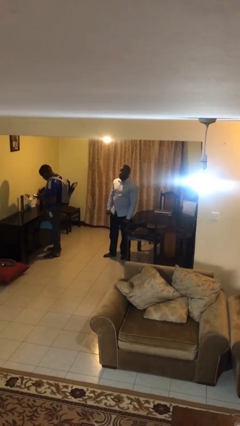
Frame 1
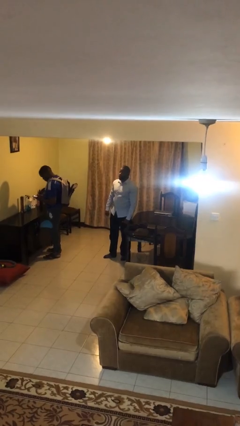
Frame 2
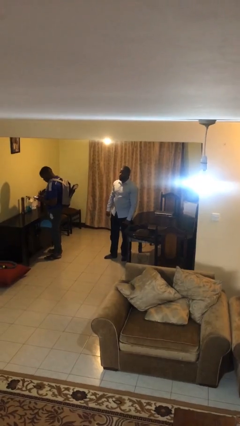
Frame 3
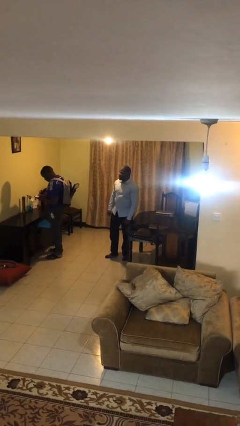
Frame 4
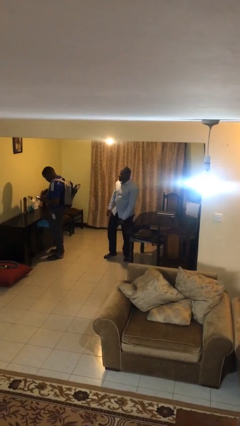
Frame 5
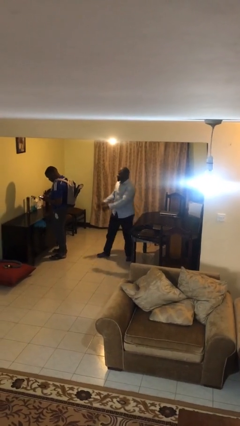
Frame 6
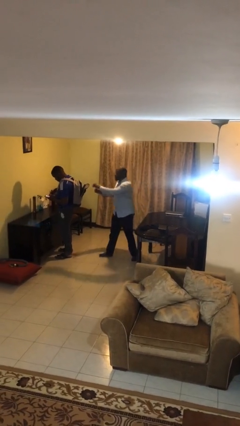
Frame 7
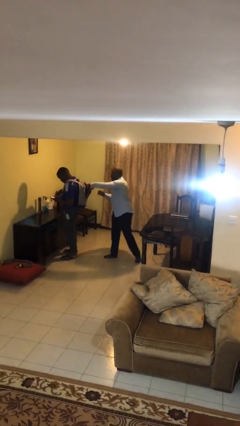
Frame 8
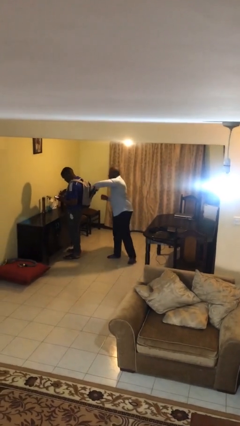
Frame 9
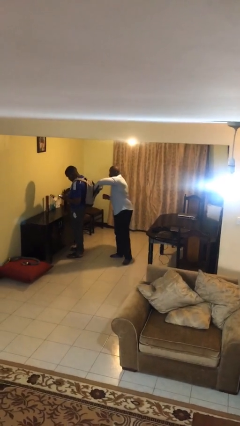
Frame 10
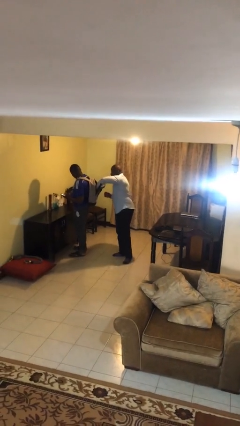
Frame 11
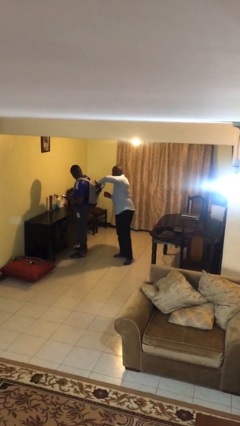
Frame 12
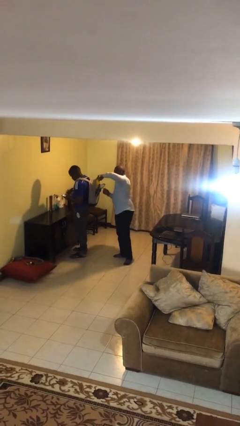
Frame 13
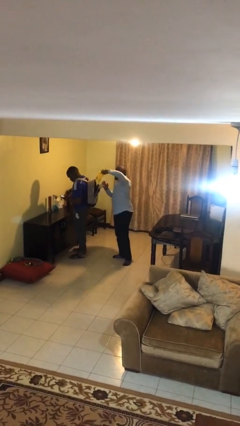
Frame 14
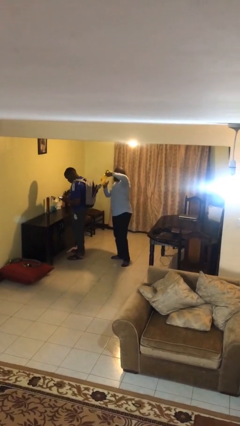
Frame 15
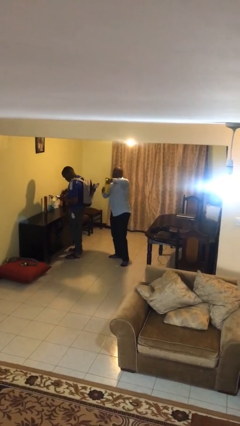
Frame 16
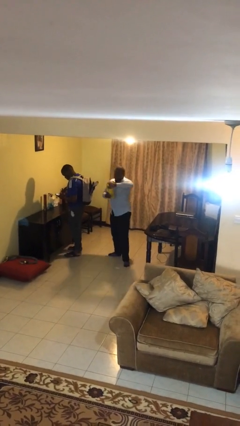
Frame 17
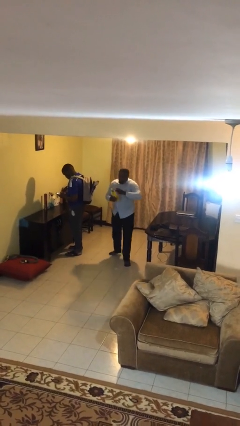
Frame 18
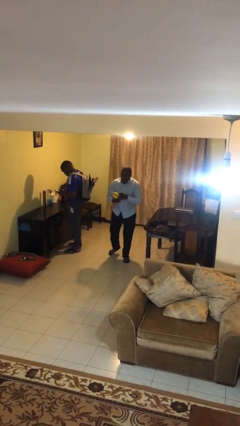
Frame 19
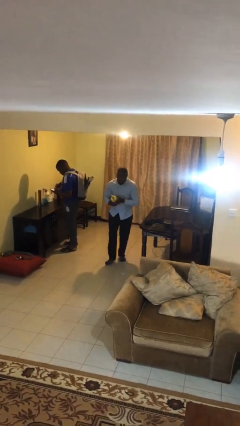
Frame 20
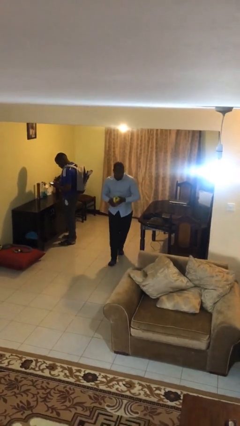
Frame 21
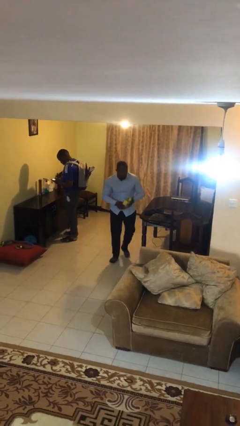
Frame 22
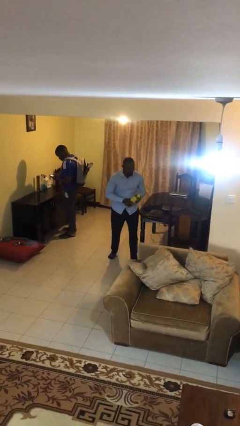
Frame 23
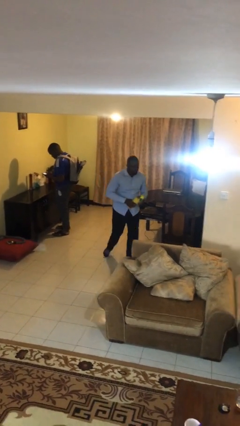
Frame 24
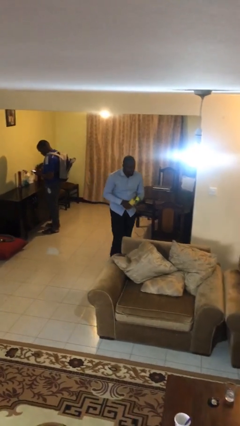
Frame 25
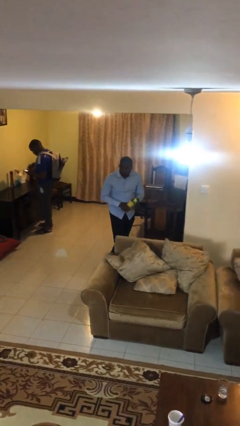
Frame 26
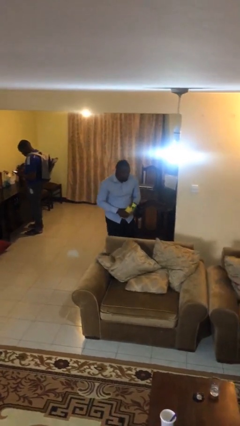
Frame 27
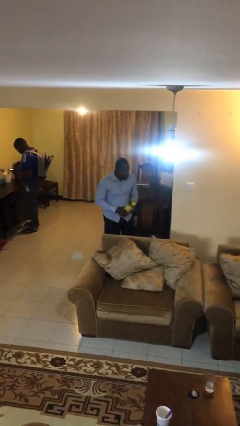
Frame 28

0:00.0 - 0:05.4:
person steals object from person

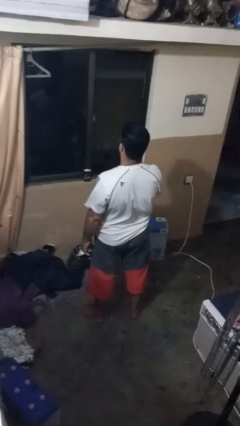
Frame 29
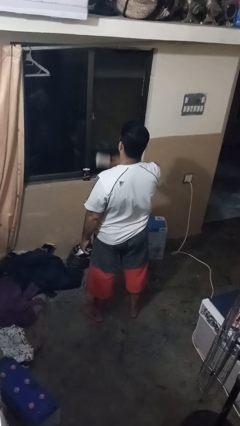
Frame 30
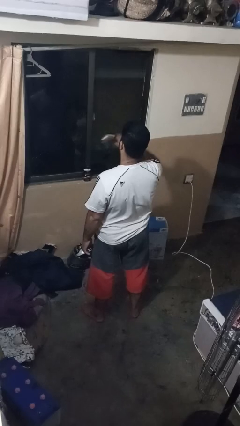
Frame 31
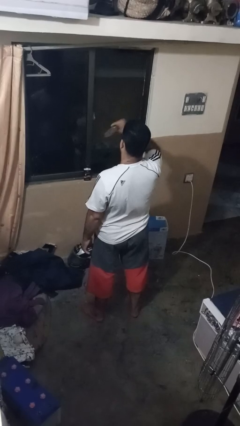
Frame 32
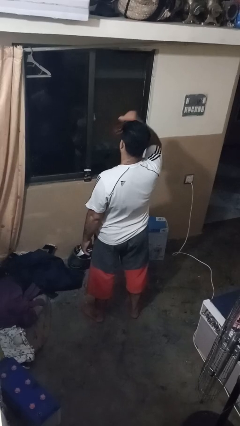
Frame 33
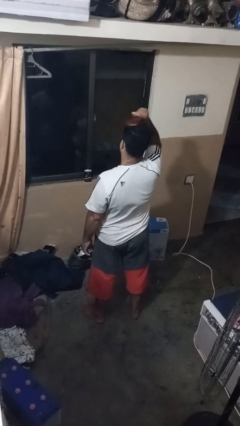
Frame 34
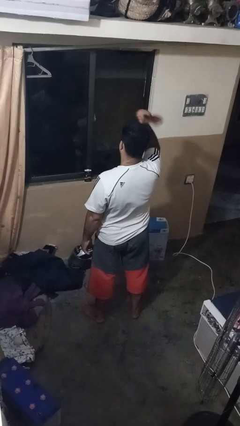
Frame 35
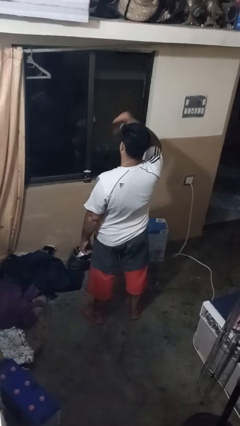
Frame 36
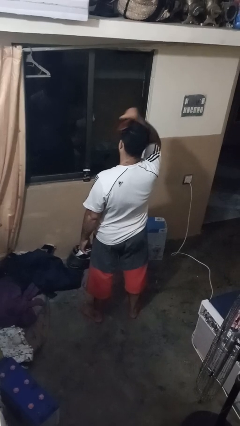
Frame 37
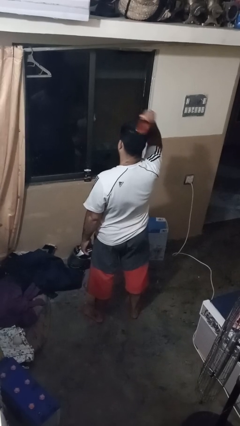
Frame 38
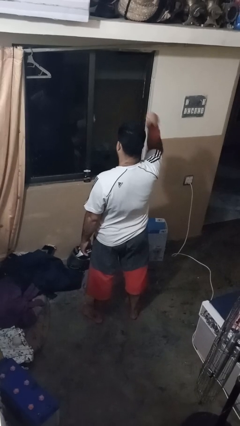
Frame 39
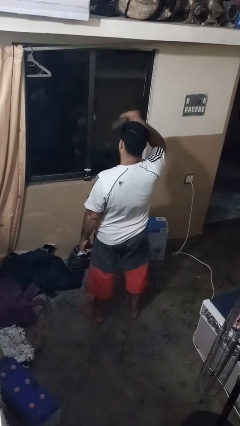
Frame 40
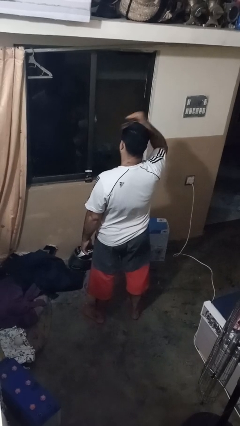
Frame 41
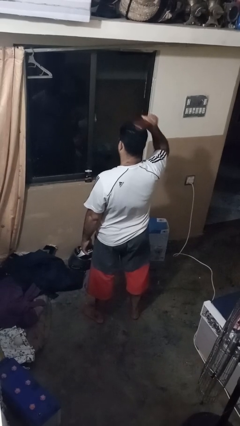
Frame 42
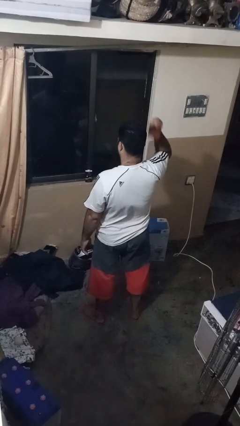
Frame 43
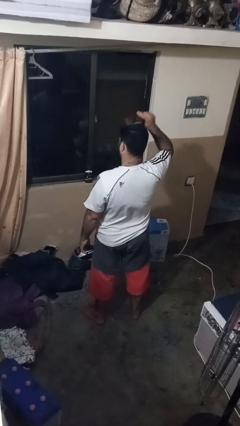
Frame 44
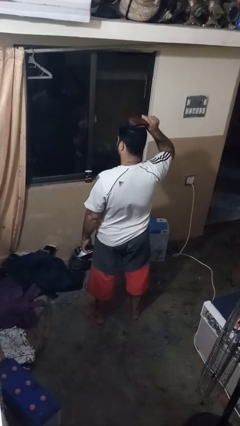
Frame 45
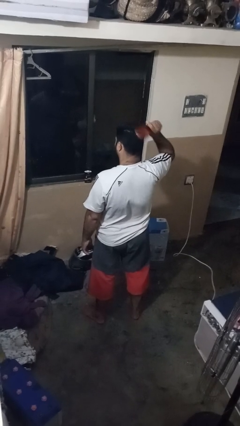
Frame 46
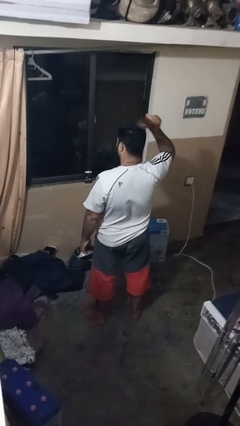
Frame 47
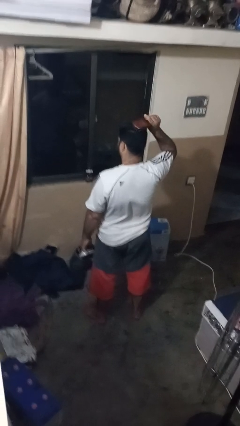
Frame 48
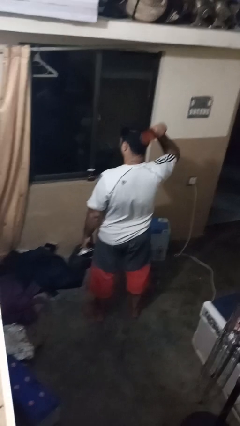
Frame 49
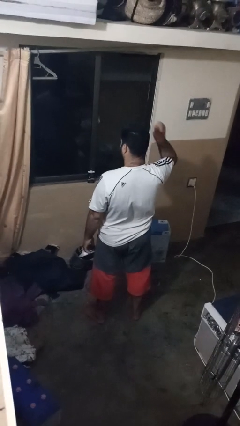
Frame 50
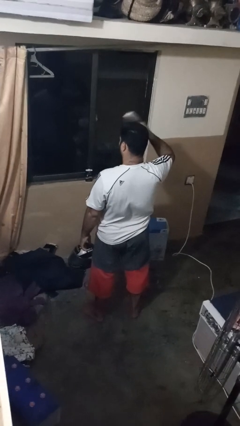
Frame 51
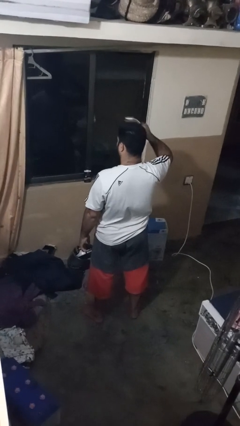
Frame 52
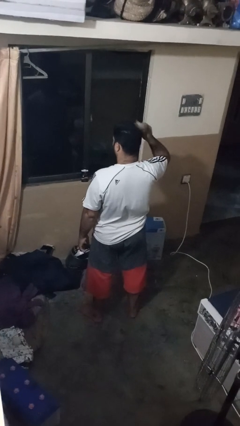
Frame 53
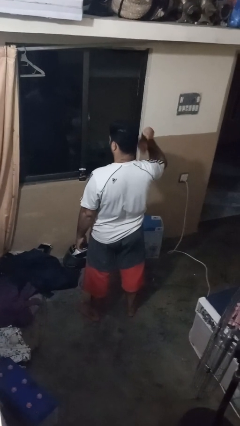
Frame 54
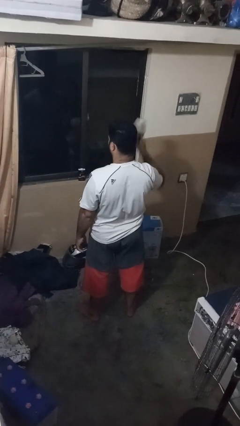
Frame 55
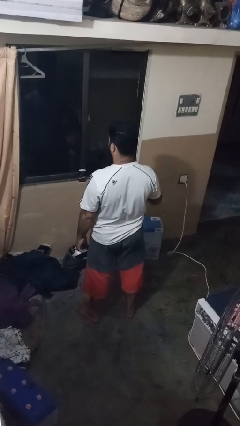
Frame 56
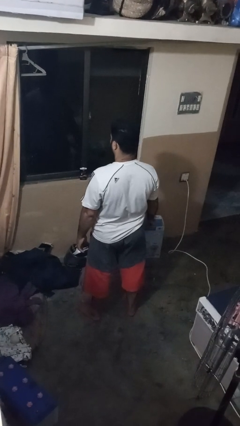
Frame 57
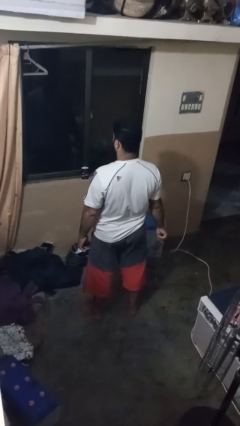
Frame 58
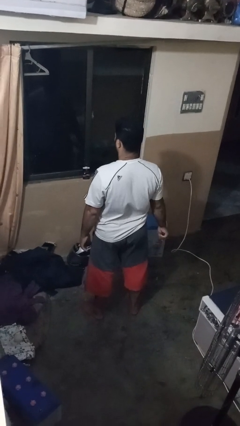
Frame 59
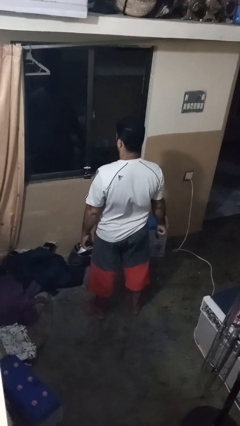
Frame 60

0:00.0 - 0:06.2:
person brushes hair

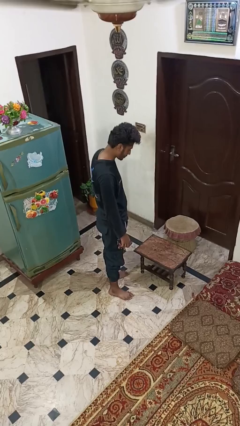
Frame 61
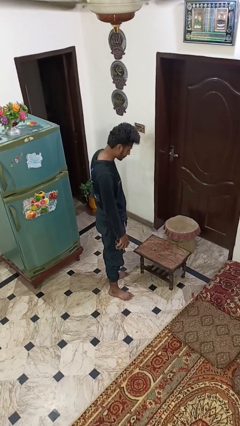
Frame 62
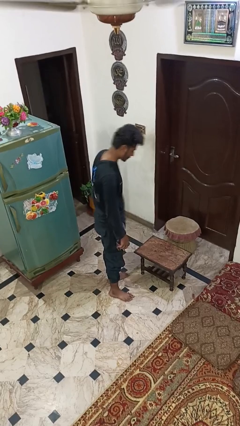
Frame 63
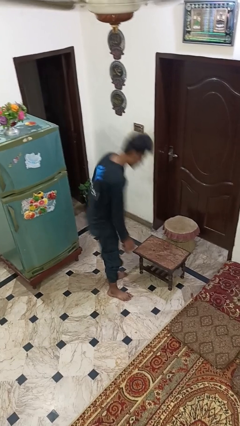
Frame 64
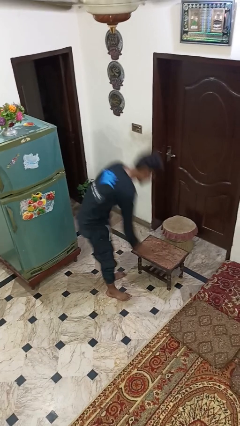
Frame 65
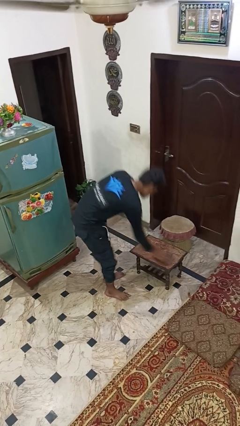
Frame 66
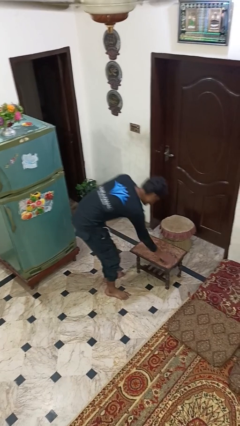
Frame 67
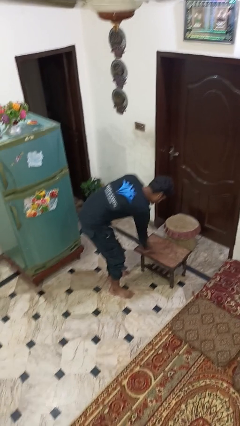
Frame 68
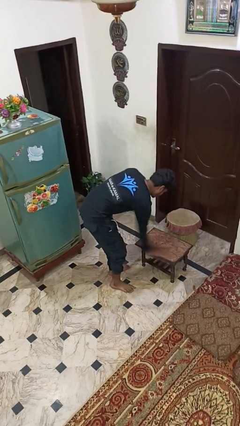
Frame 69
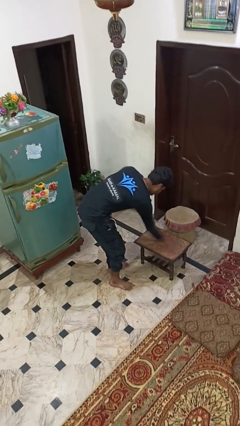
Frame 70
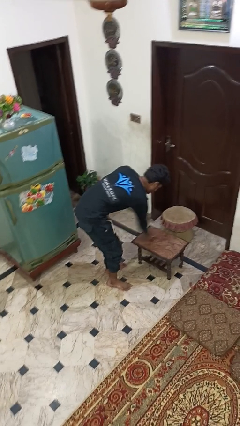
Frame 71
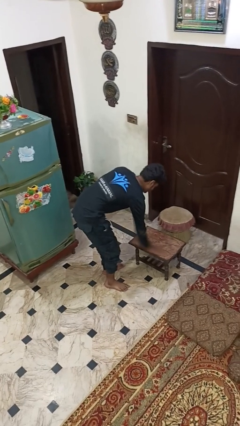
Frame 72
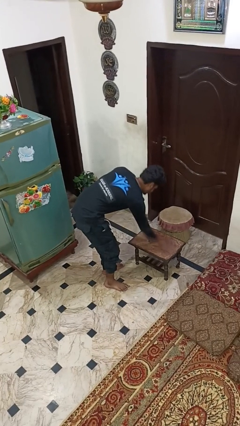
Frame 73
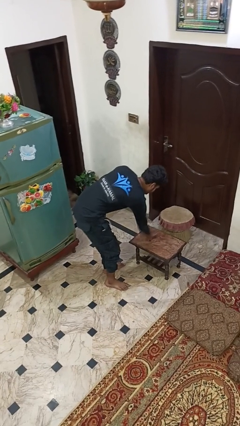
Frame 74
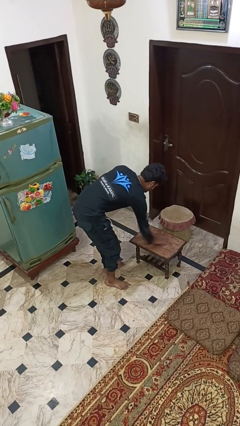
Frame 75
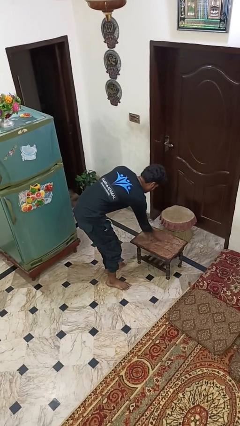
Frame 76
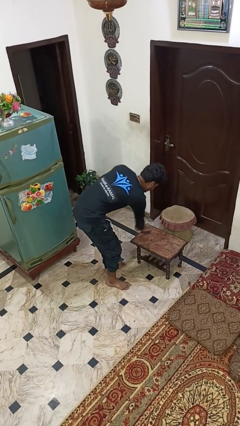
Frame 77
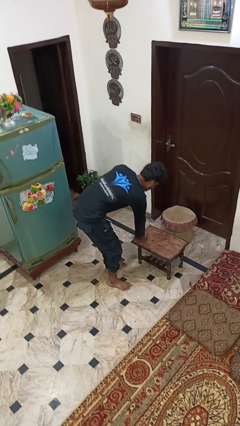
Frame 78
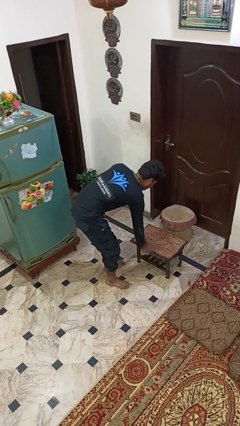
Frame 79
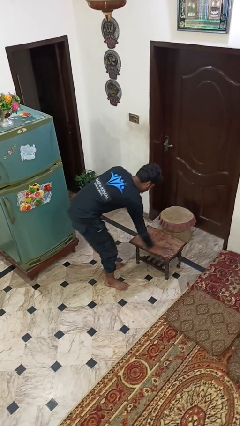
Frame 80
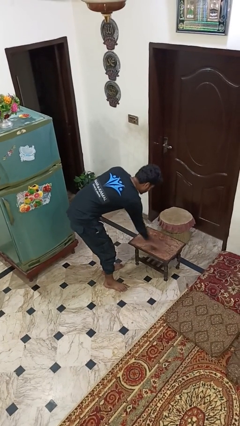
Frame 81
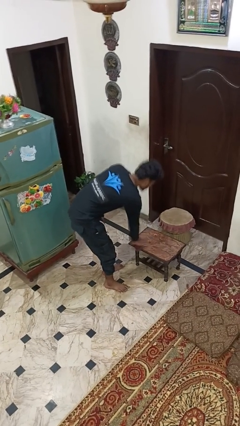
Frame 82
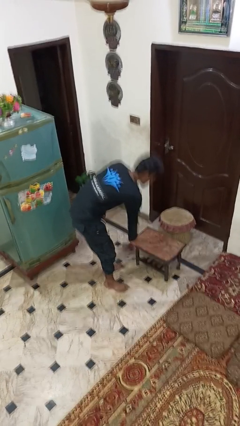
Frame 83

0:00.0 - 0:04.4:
person cleans table with rag

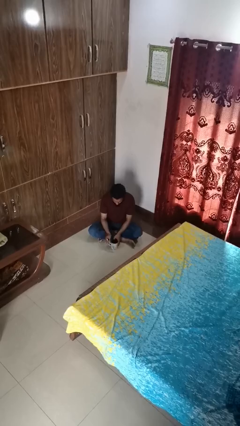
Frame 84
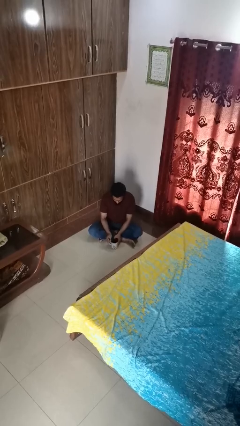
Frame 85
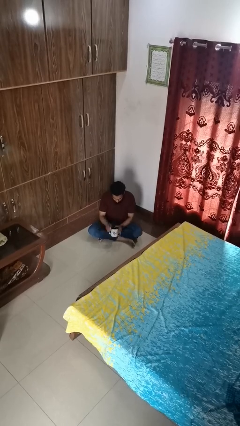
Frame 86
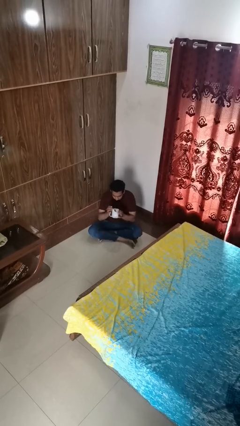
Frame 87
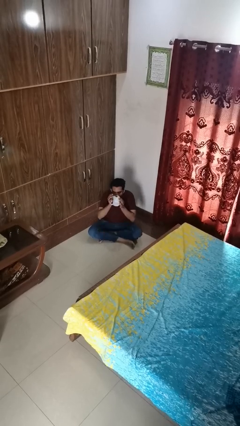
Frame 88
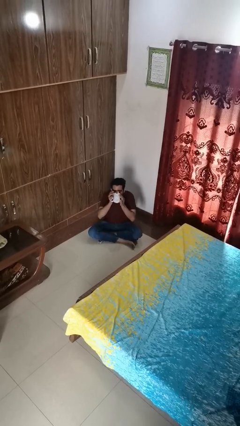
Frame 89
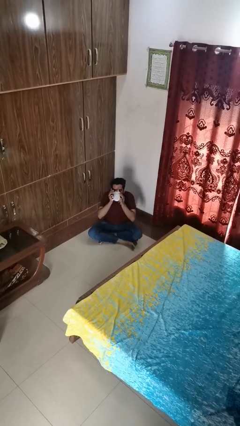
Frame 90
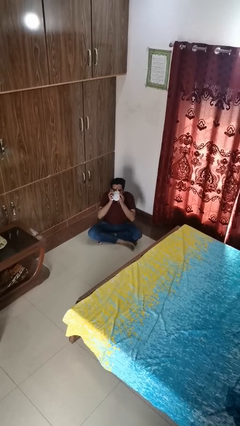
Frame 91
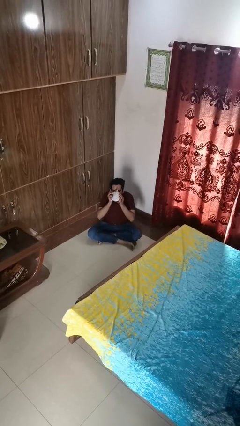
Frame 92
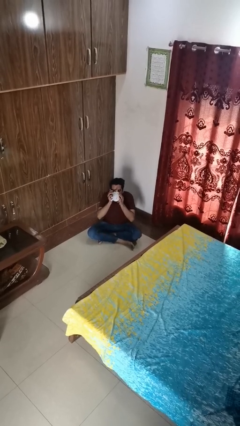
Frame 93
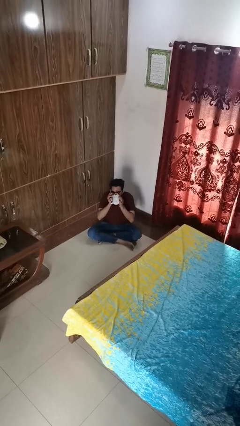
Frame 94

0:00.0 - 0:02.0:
person drinks from mug
